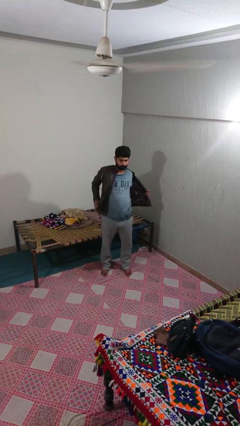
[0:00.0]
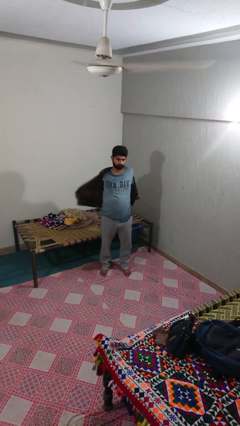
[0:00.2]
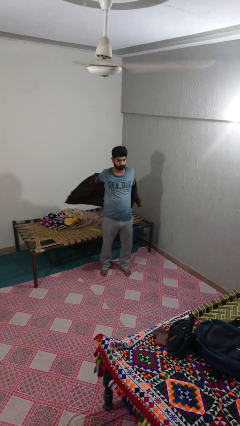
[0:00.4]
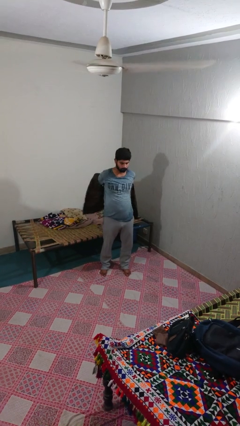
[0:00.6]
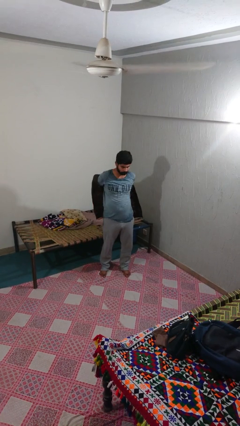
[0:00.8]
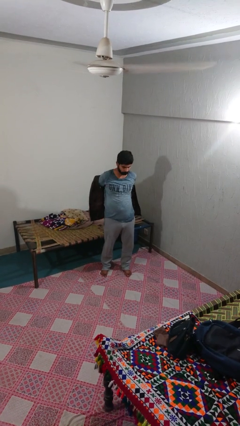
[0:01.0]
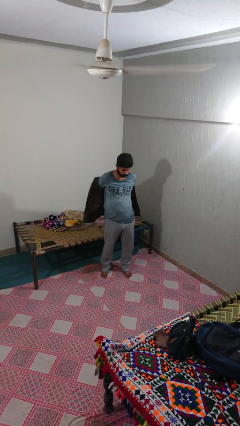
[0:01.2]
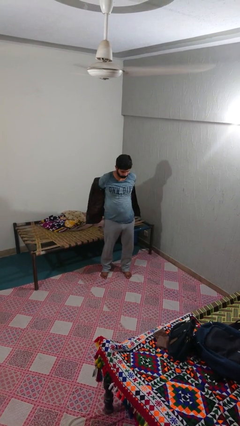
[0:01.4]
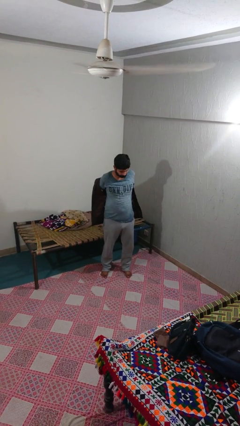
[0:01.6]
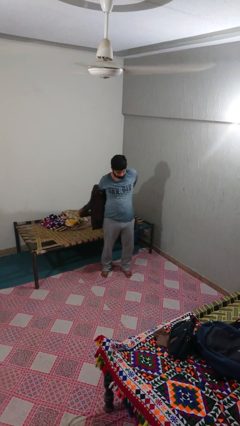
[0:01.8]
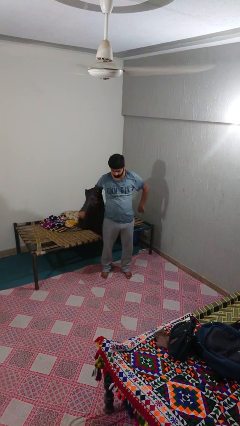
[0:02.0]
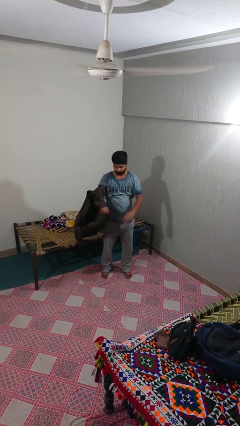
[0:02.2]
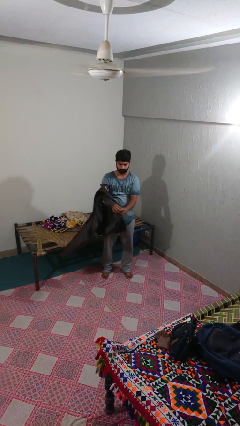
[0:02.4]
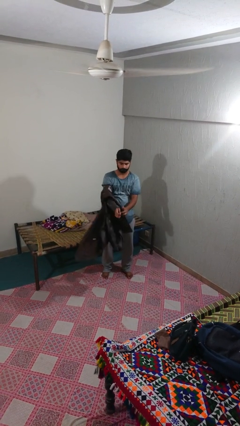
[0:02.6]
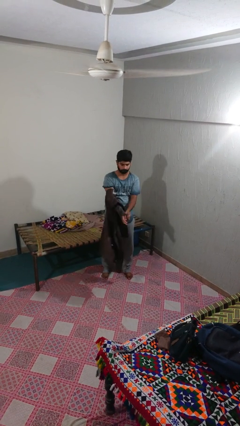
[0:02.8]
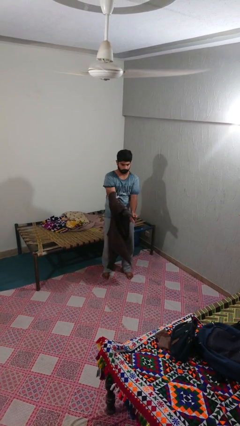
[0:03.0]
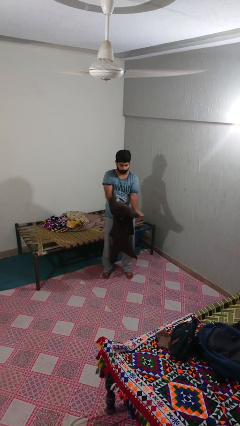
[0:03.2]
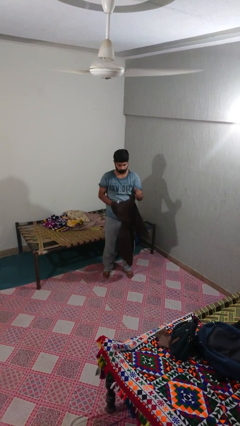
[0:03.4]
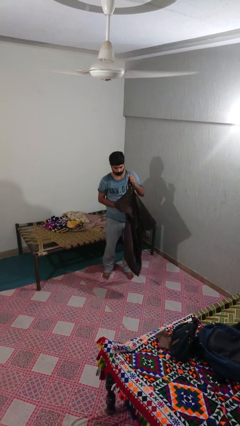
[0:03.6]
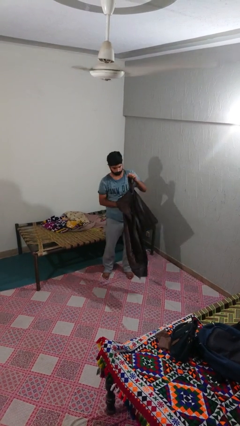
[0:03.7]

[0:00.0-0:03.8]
person takes off jacket

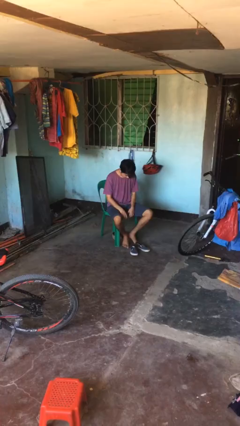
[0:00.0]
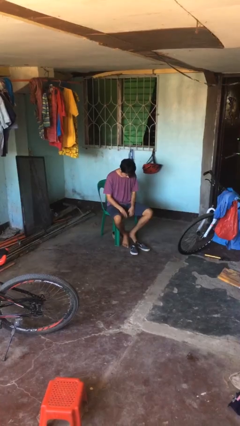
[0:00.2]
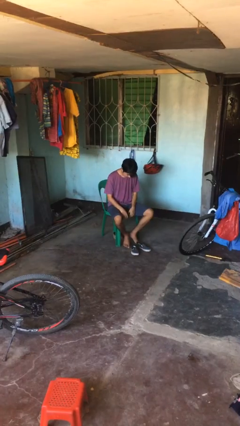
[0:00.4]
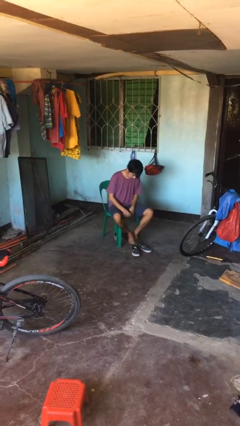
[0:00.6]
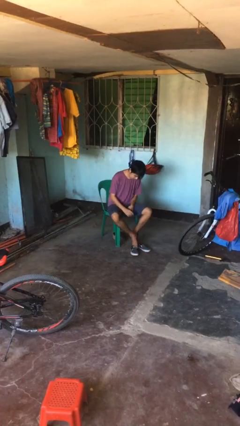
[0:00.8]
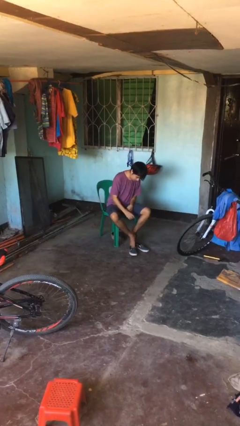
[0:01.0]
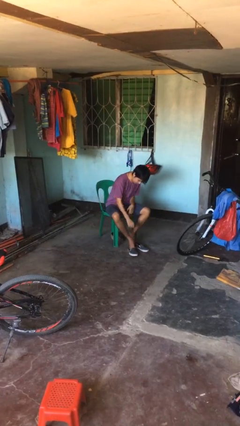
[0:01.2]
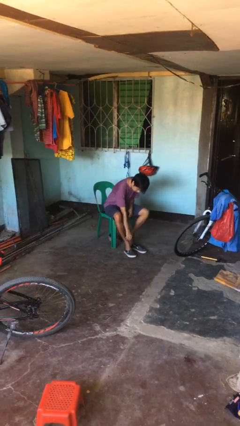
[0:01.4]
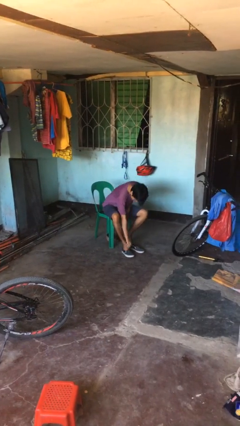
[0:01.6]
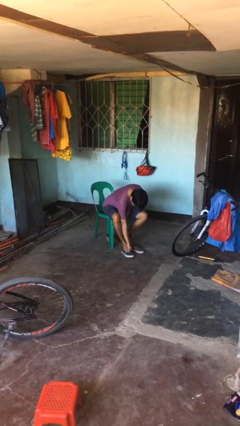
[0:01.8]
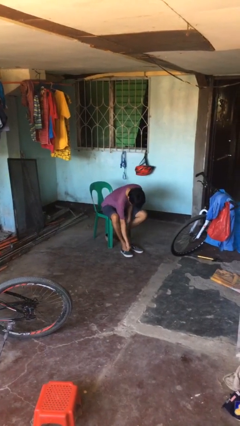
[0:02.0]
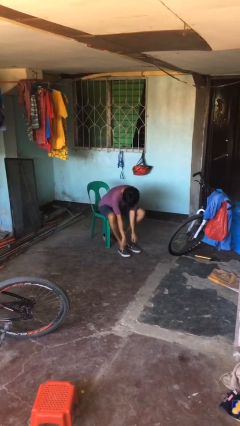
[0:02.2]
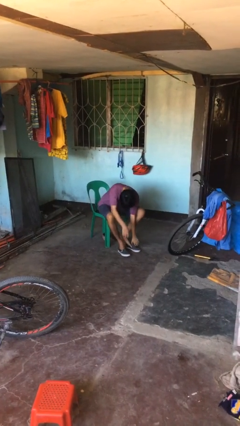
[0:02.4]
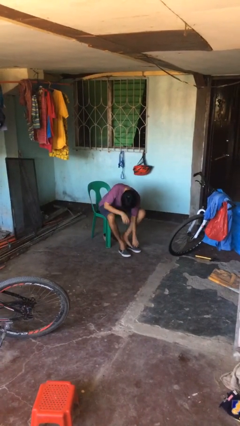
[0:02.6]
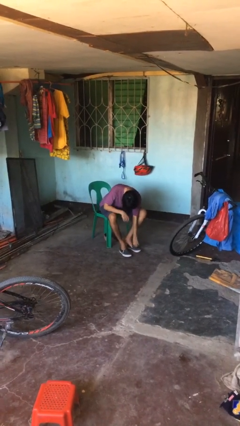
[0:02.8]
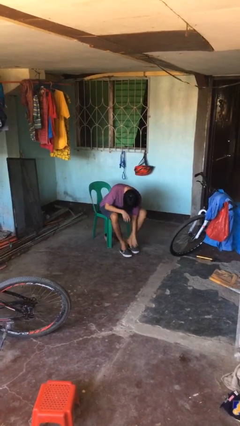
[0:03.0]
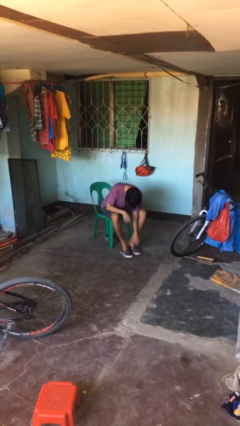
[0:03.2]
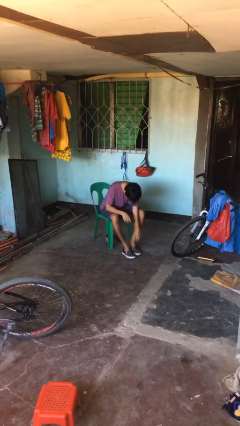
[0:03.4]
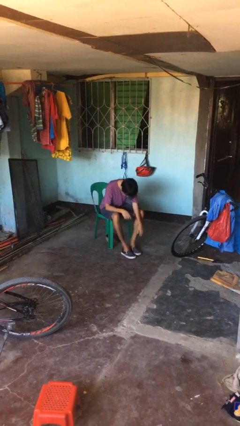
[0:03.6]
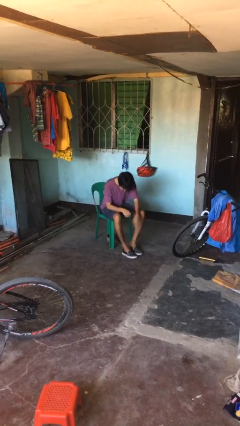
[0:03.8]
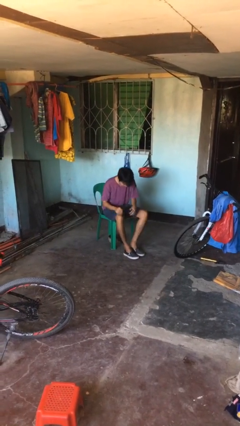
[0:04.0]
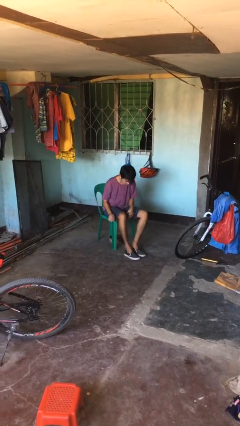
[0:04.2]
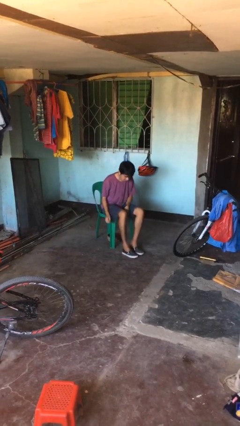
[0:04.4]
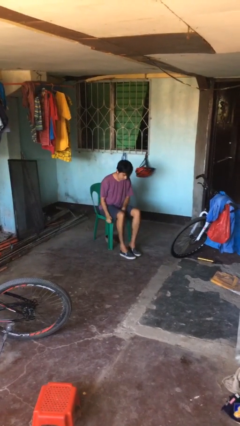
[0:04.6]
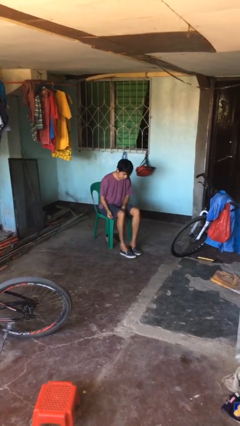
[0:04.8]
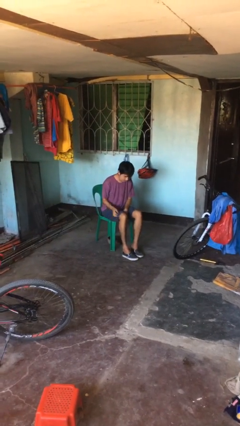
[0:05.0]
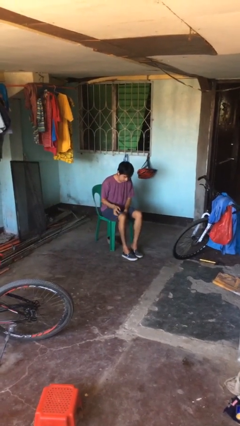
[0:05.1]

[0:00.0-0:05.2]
person puts on shoes

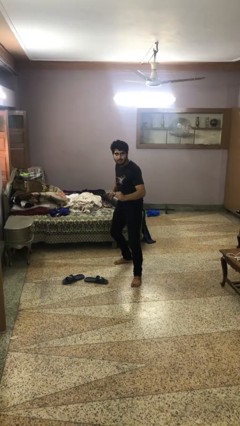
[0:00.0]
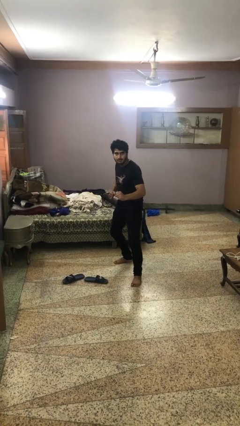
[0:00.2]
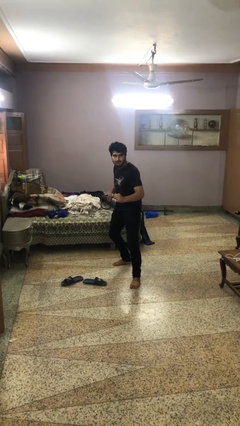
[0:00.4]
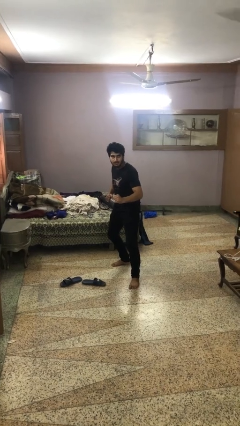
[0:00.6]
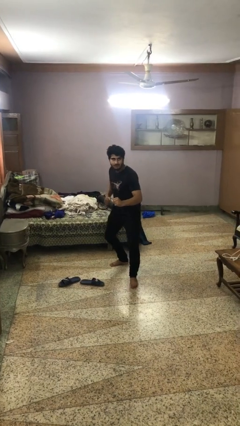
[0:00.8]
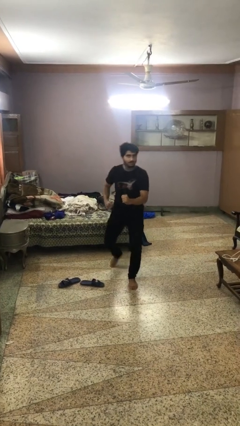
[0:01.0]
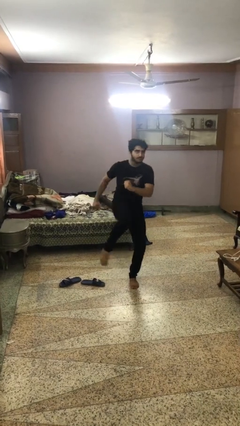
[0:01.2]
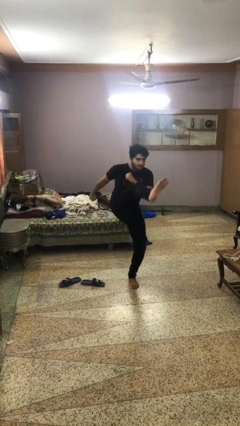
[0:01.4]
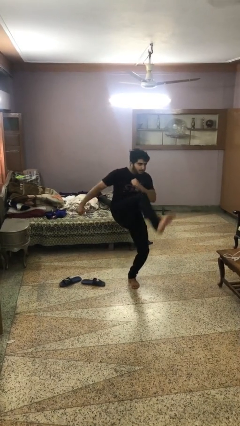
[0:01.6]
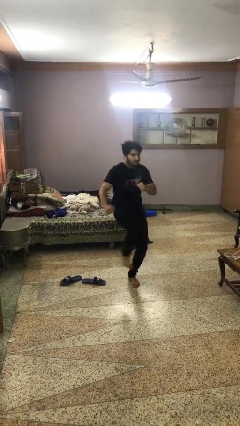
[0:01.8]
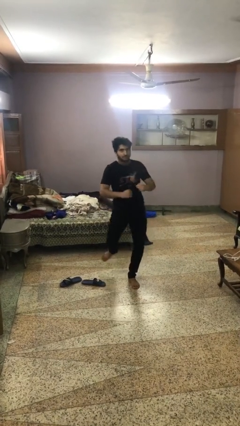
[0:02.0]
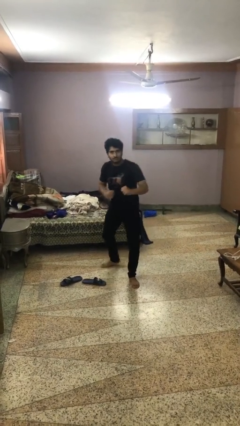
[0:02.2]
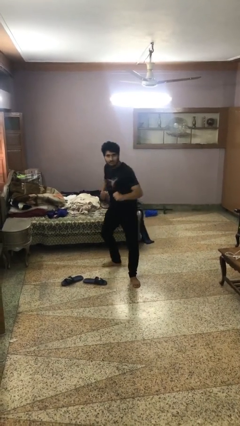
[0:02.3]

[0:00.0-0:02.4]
person karate kicks

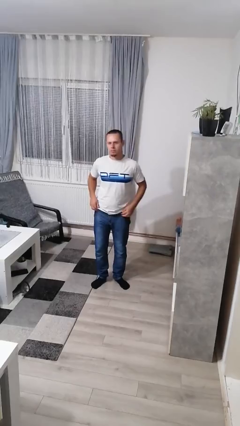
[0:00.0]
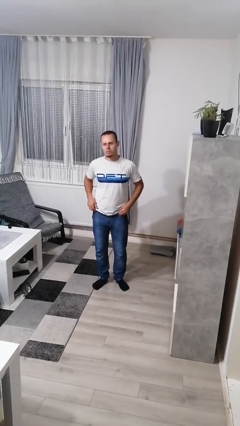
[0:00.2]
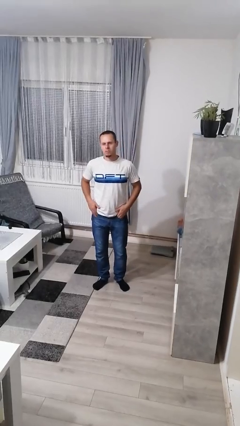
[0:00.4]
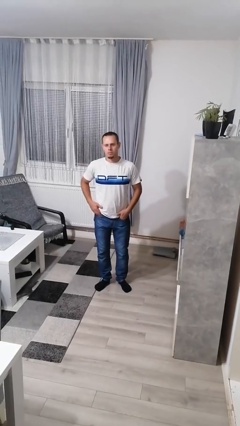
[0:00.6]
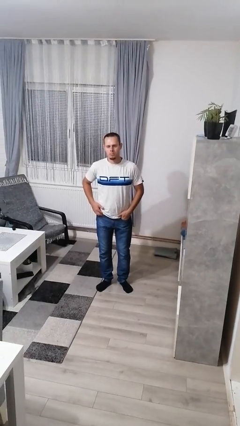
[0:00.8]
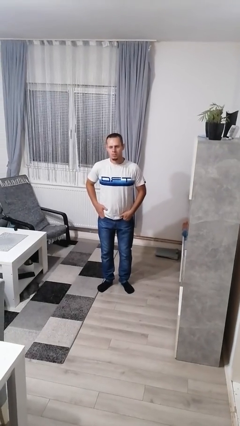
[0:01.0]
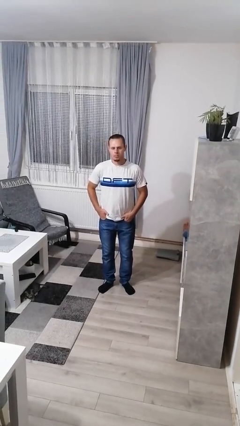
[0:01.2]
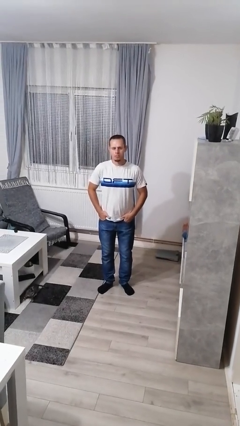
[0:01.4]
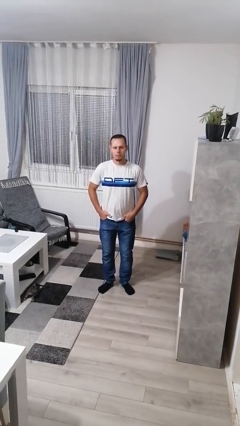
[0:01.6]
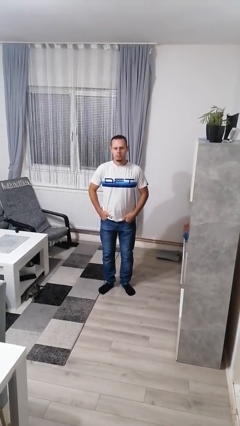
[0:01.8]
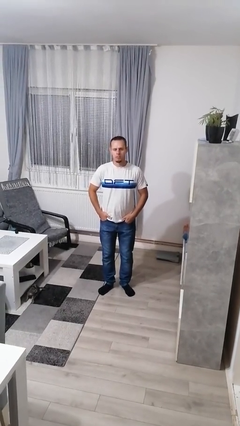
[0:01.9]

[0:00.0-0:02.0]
person puts hands in back pockets

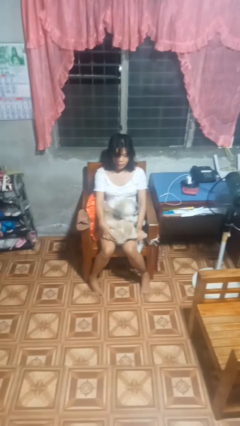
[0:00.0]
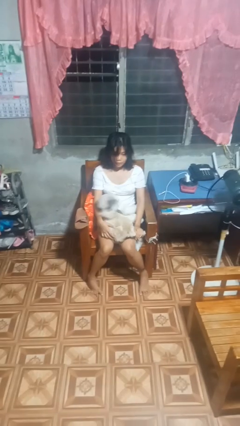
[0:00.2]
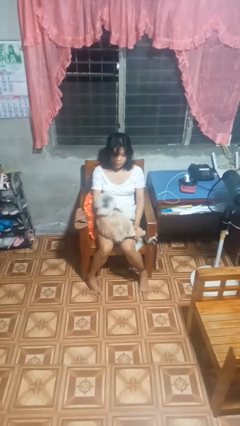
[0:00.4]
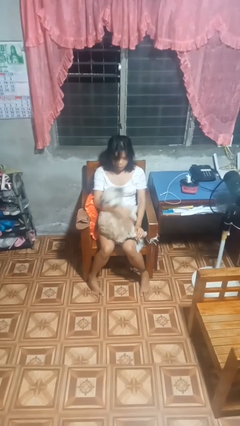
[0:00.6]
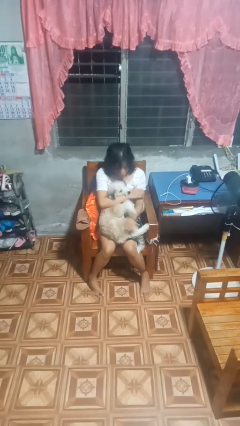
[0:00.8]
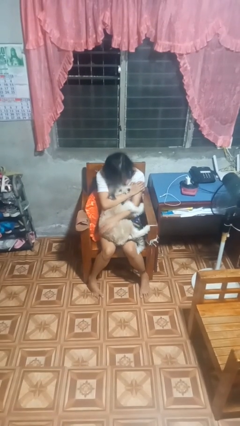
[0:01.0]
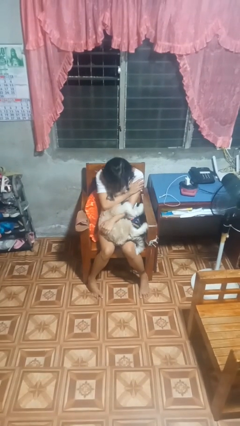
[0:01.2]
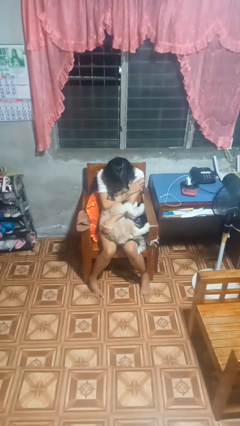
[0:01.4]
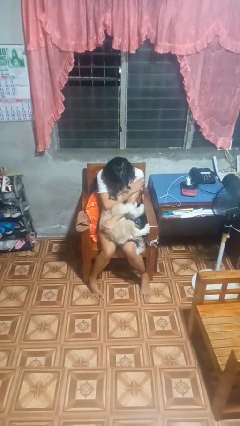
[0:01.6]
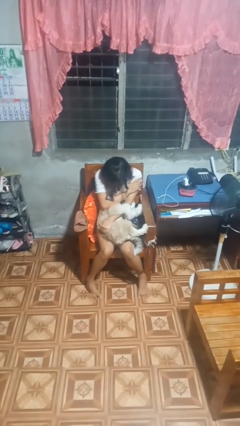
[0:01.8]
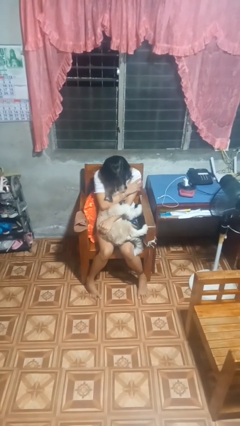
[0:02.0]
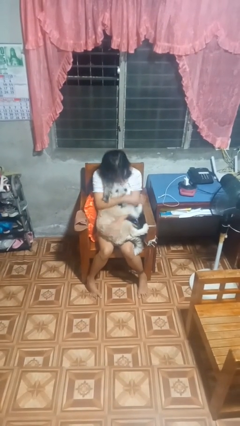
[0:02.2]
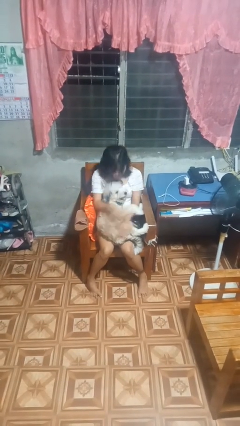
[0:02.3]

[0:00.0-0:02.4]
person hugs dog

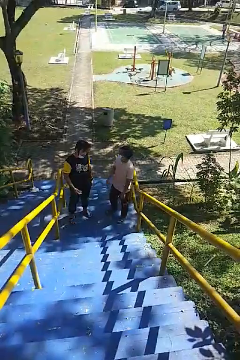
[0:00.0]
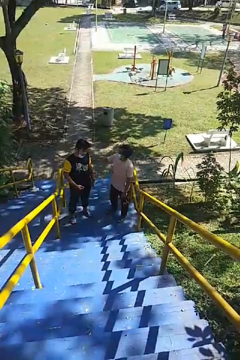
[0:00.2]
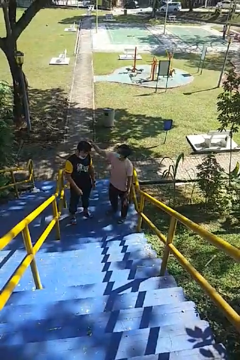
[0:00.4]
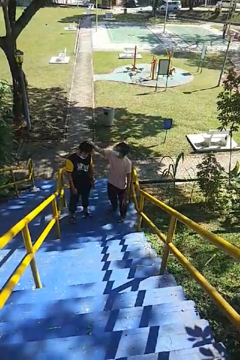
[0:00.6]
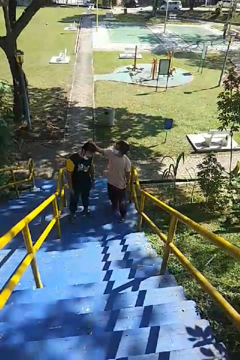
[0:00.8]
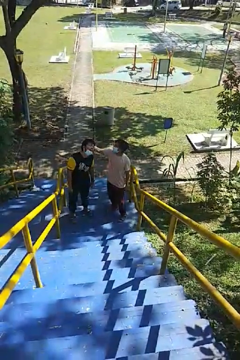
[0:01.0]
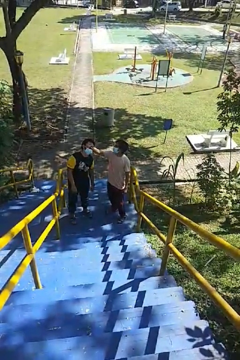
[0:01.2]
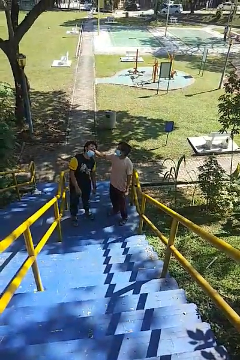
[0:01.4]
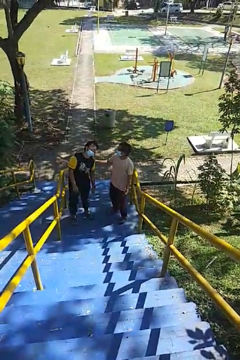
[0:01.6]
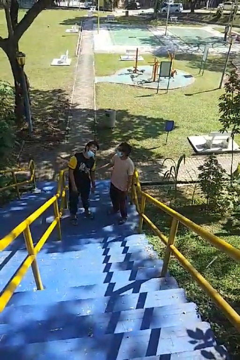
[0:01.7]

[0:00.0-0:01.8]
person grabs person by hair
